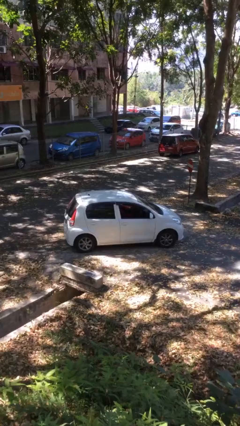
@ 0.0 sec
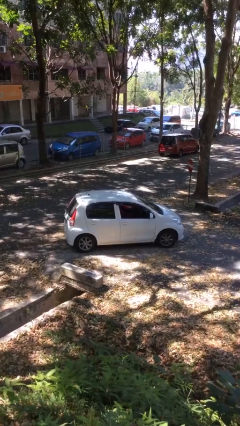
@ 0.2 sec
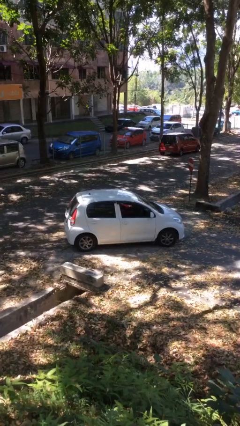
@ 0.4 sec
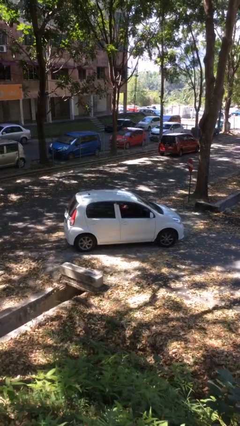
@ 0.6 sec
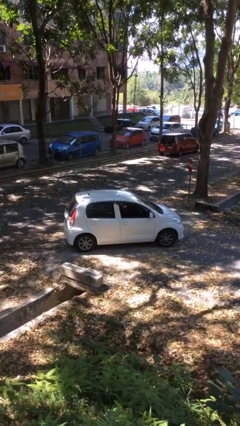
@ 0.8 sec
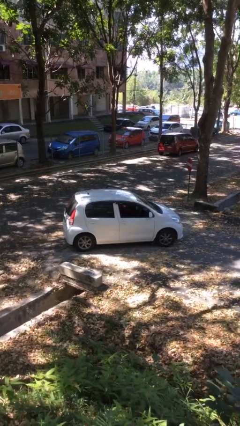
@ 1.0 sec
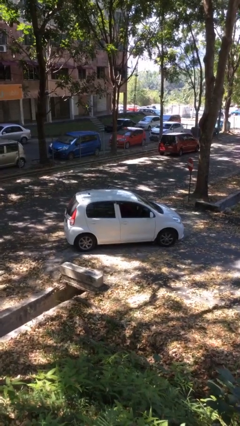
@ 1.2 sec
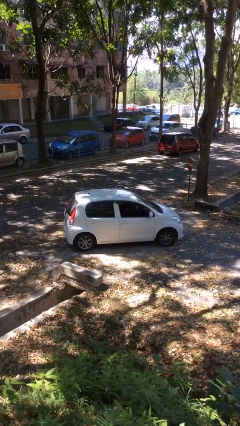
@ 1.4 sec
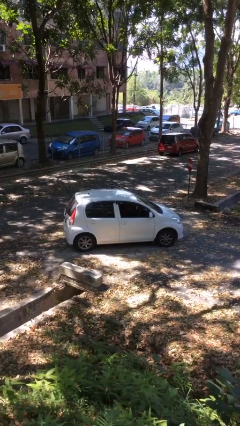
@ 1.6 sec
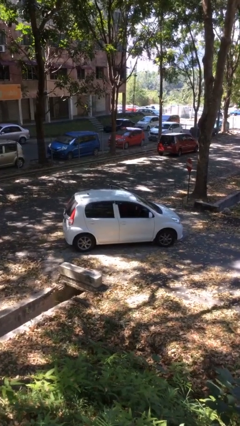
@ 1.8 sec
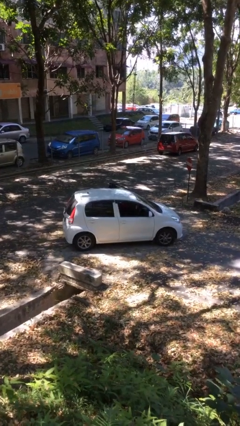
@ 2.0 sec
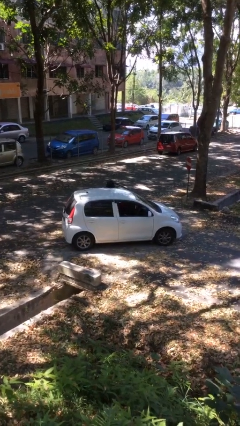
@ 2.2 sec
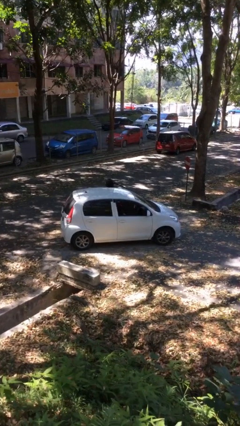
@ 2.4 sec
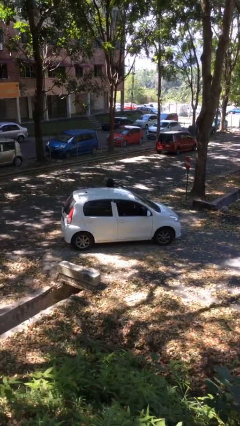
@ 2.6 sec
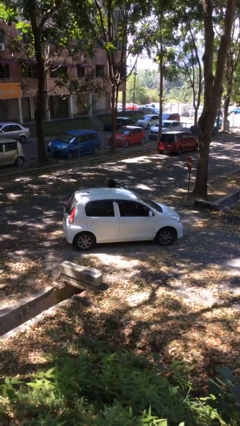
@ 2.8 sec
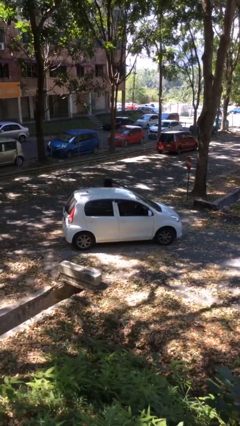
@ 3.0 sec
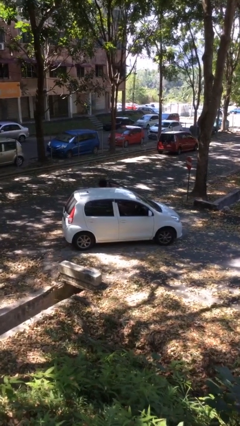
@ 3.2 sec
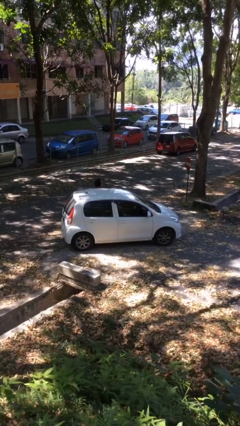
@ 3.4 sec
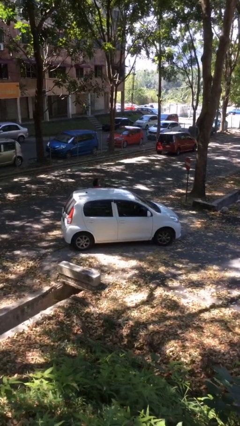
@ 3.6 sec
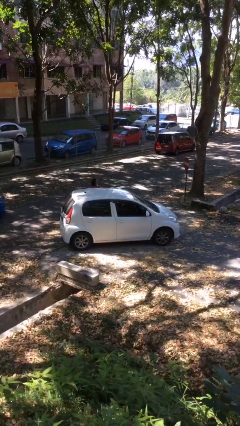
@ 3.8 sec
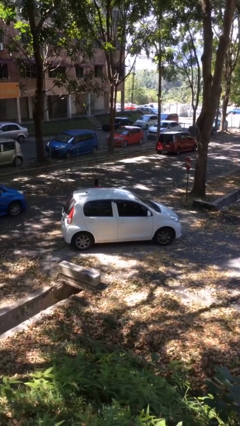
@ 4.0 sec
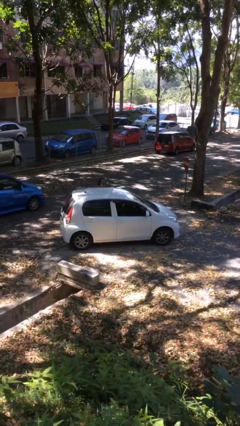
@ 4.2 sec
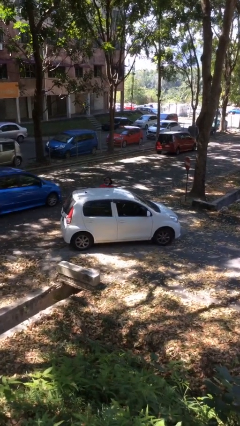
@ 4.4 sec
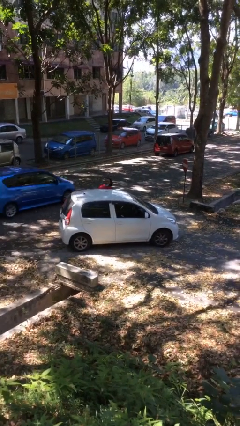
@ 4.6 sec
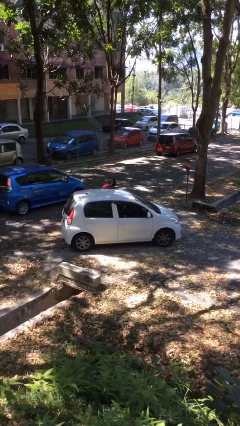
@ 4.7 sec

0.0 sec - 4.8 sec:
car drops off person

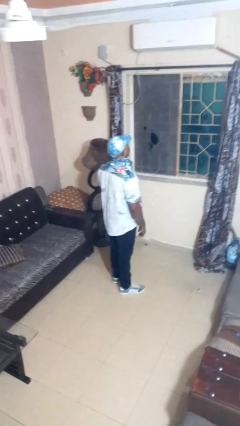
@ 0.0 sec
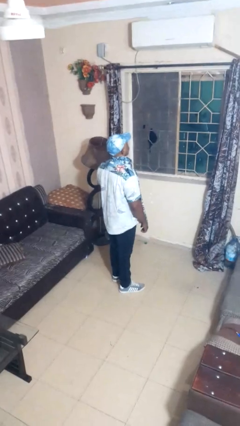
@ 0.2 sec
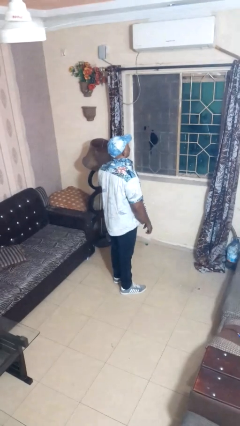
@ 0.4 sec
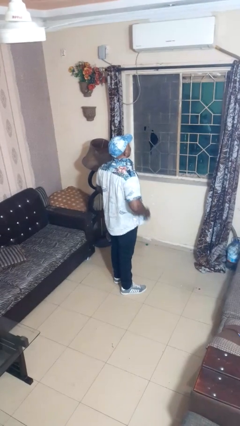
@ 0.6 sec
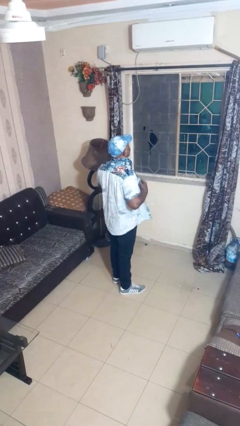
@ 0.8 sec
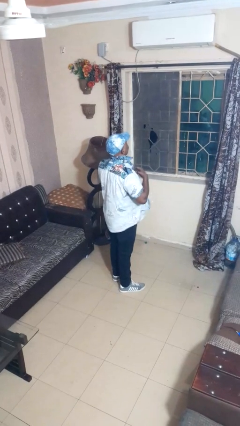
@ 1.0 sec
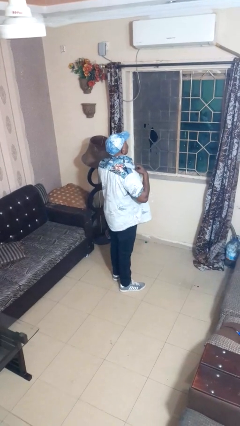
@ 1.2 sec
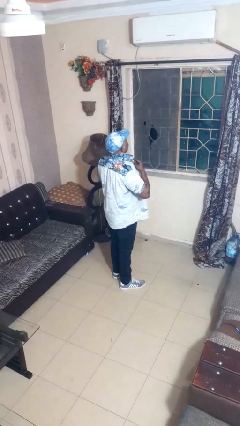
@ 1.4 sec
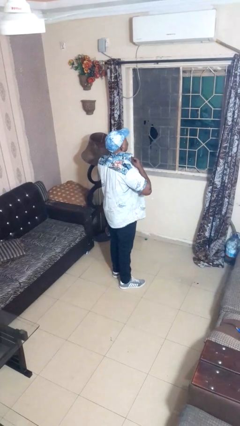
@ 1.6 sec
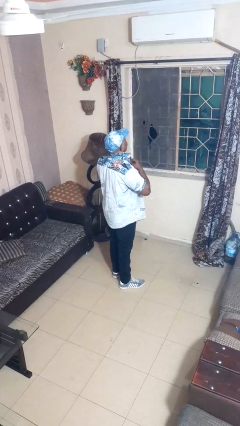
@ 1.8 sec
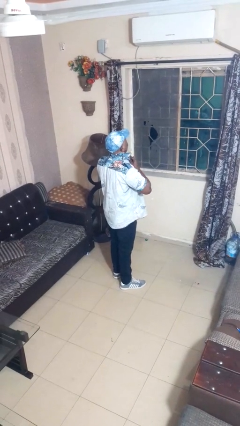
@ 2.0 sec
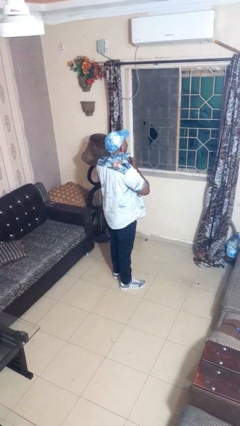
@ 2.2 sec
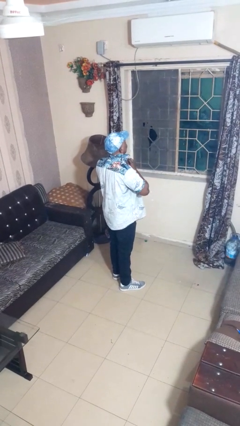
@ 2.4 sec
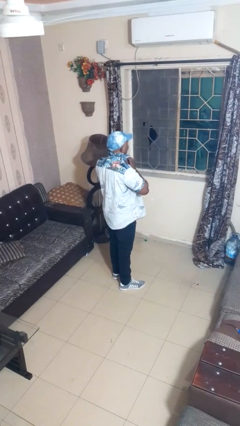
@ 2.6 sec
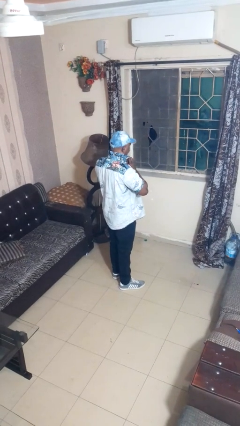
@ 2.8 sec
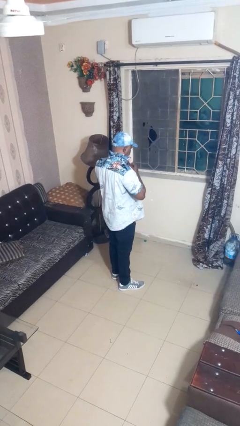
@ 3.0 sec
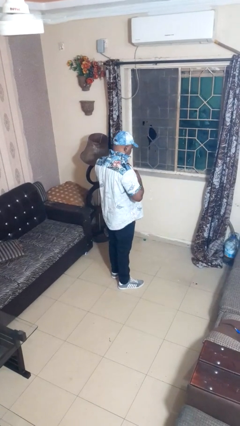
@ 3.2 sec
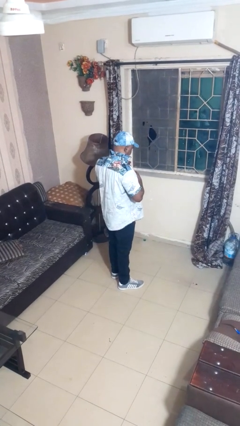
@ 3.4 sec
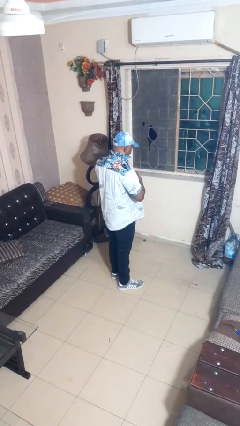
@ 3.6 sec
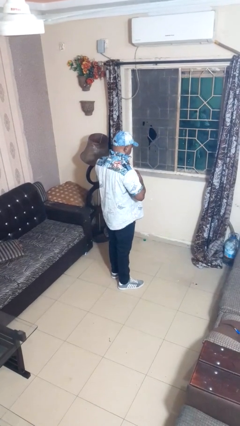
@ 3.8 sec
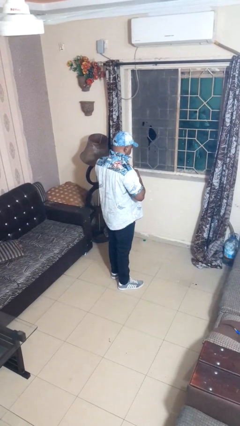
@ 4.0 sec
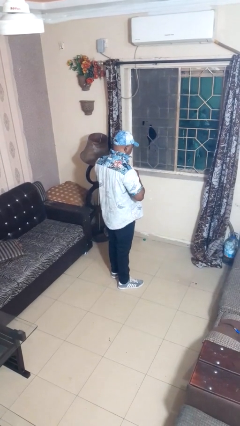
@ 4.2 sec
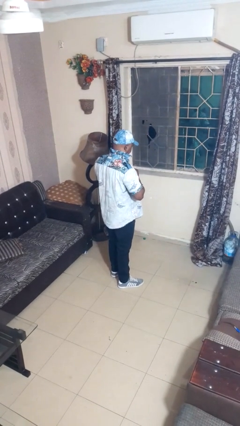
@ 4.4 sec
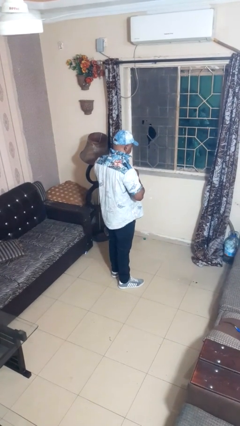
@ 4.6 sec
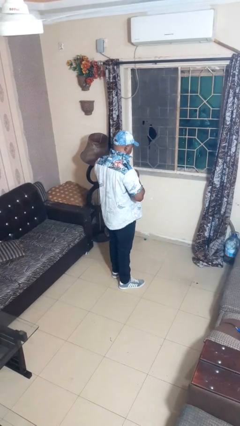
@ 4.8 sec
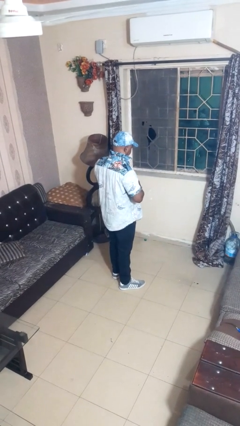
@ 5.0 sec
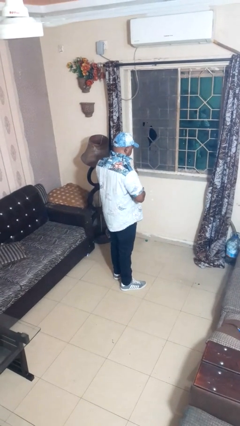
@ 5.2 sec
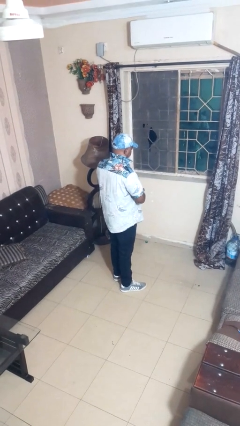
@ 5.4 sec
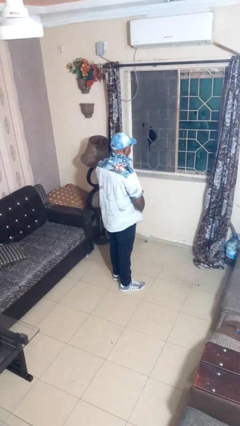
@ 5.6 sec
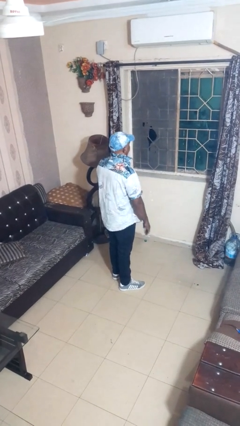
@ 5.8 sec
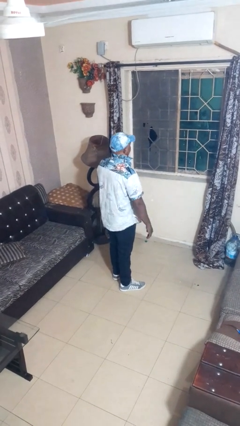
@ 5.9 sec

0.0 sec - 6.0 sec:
person buttons shirt

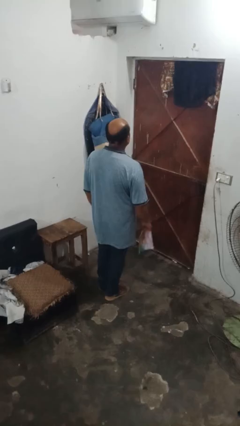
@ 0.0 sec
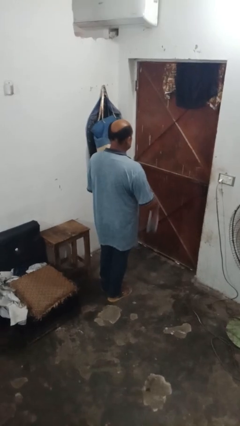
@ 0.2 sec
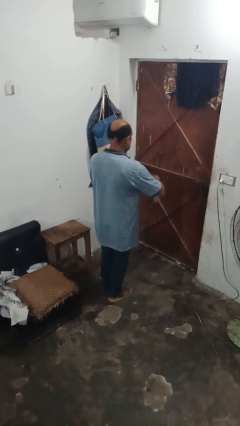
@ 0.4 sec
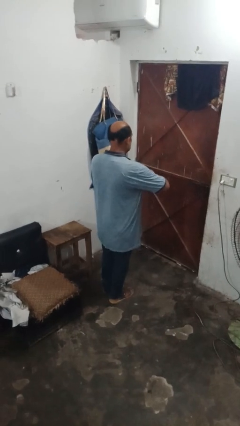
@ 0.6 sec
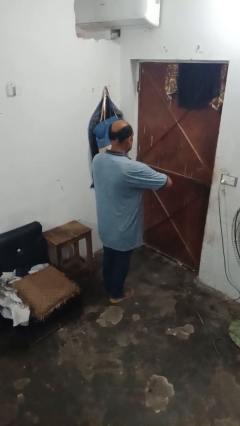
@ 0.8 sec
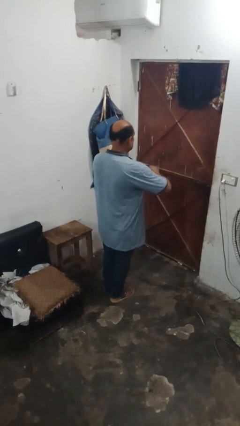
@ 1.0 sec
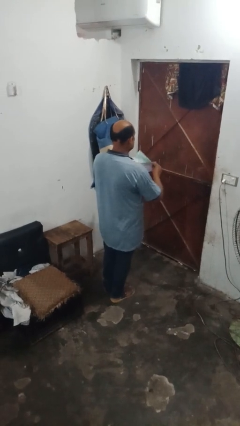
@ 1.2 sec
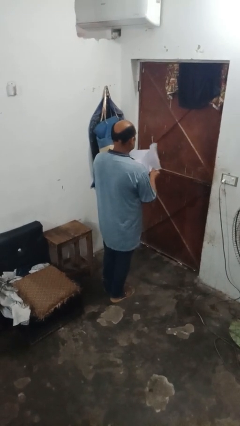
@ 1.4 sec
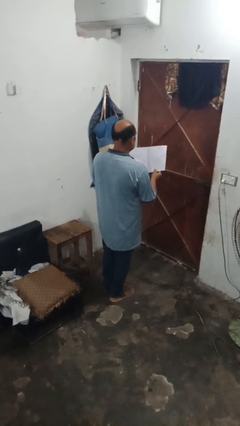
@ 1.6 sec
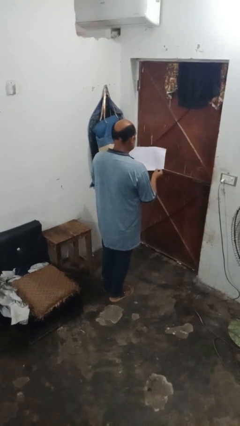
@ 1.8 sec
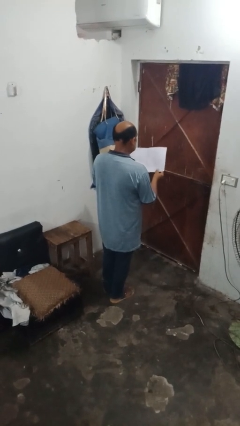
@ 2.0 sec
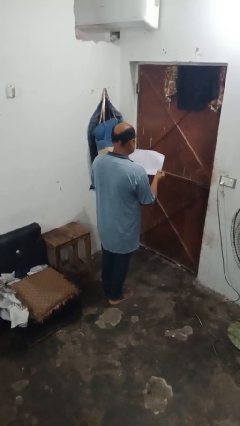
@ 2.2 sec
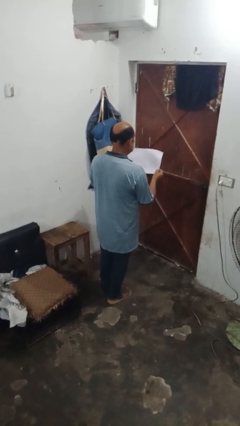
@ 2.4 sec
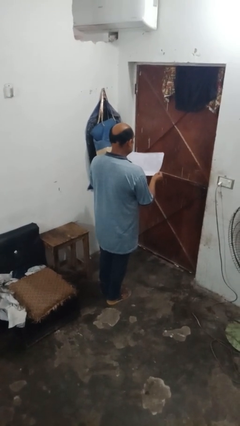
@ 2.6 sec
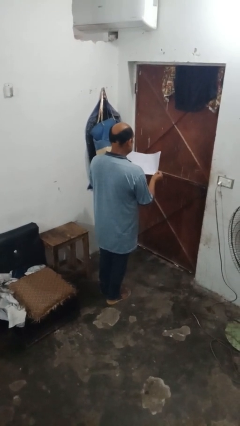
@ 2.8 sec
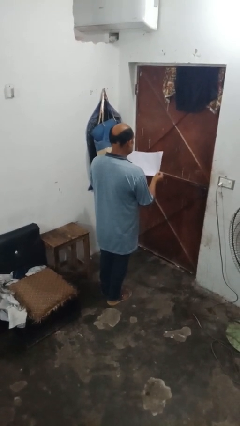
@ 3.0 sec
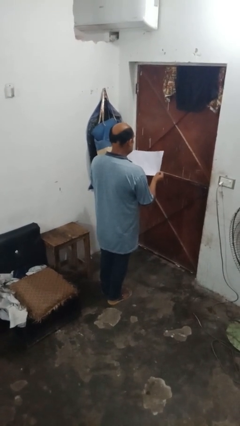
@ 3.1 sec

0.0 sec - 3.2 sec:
person reads newspaper

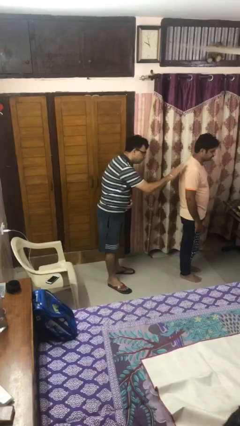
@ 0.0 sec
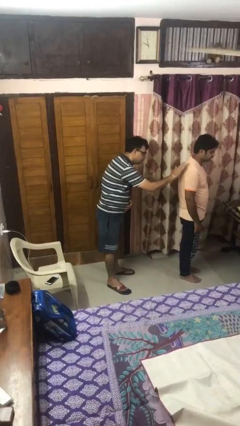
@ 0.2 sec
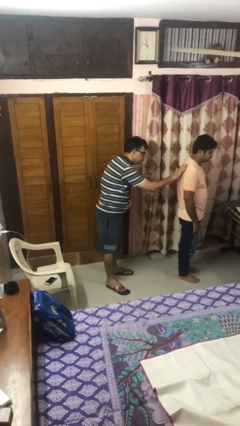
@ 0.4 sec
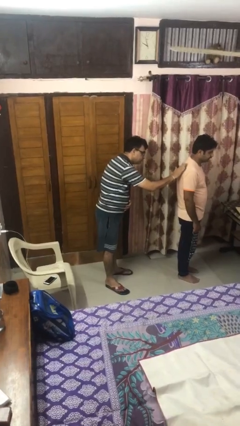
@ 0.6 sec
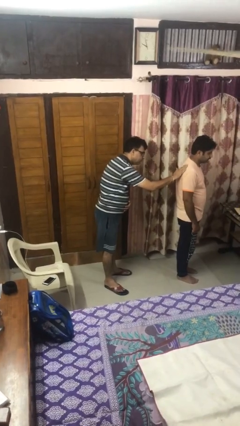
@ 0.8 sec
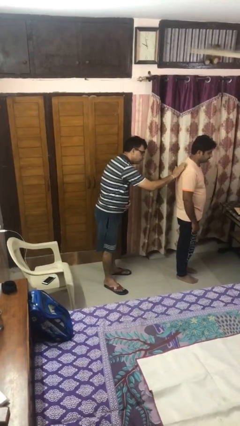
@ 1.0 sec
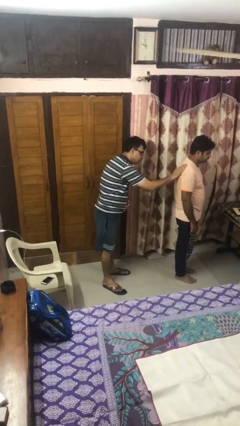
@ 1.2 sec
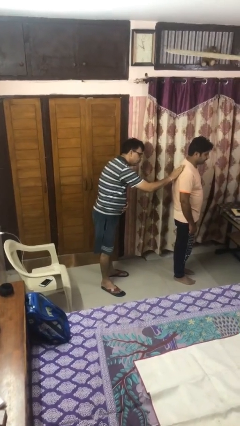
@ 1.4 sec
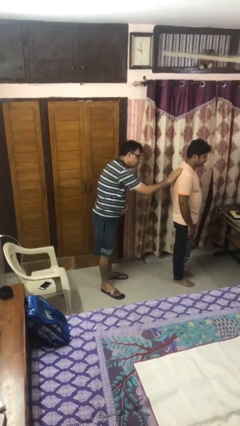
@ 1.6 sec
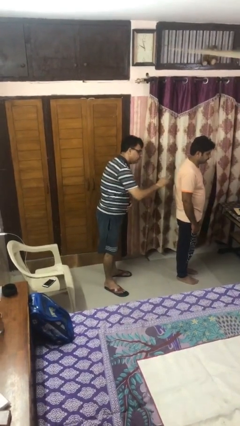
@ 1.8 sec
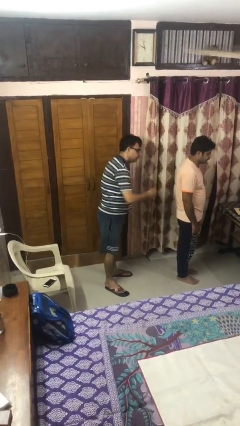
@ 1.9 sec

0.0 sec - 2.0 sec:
person touches back of person

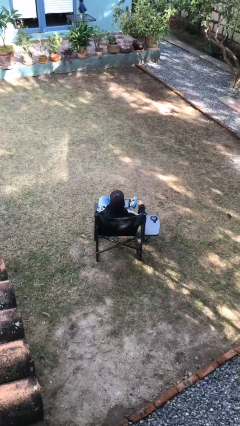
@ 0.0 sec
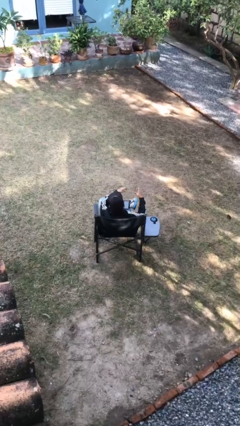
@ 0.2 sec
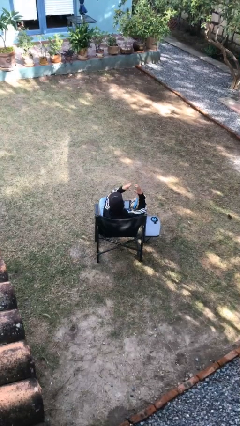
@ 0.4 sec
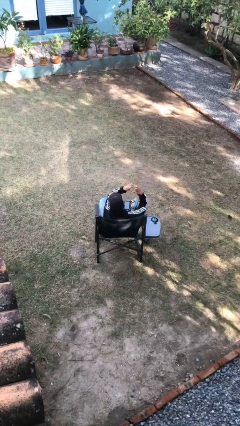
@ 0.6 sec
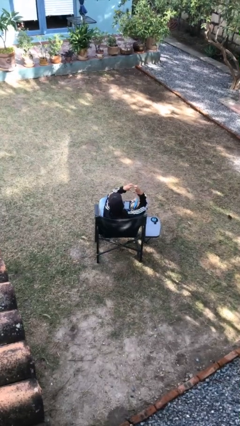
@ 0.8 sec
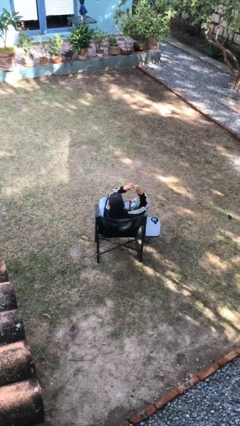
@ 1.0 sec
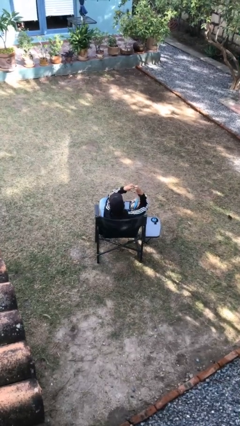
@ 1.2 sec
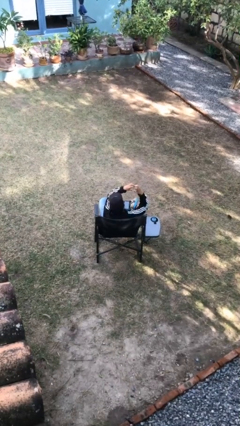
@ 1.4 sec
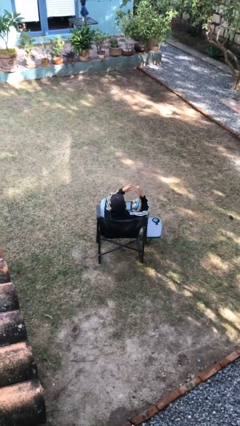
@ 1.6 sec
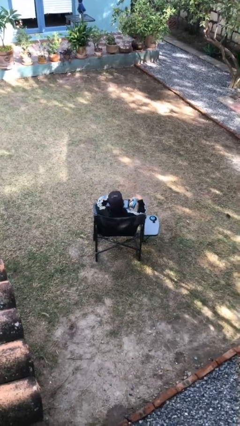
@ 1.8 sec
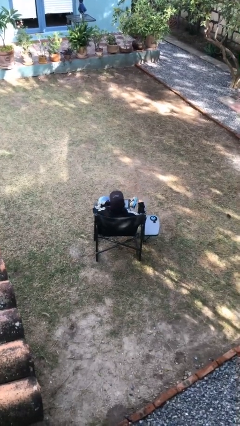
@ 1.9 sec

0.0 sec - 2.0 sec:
person gestures heart
